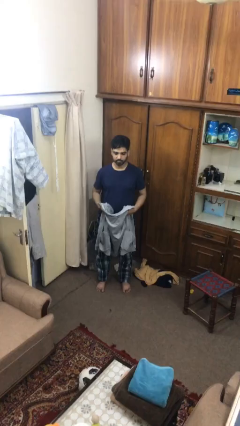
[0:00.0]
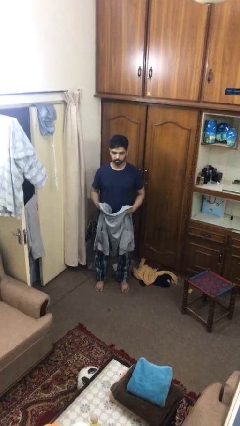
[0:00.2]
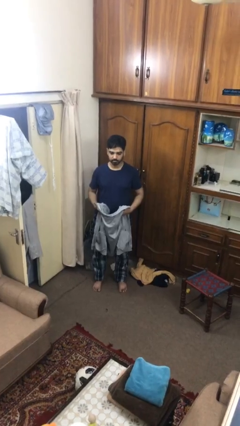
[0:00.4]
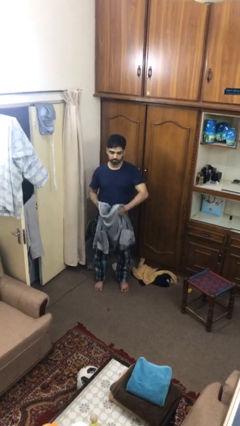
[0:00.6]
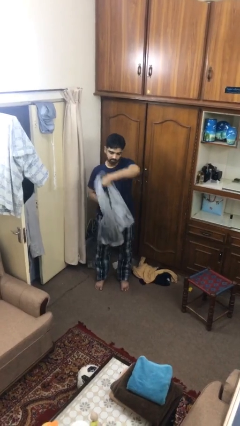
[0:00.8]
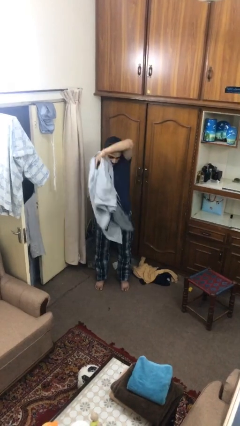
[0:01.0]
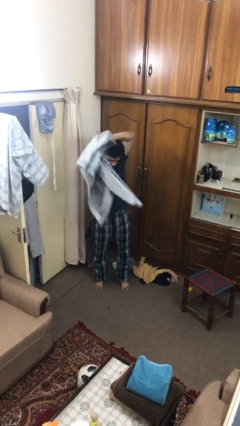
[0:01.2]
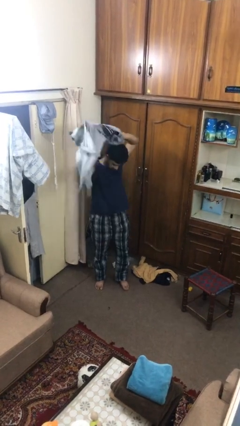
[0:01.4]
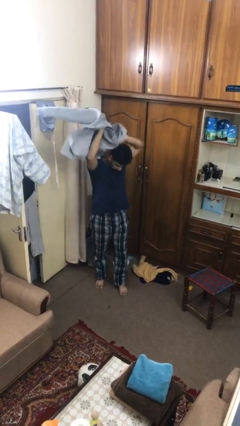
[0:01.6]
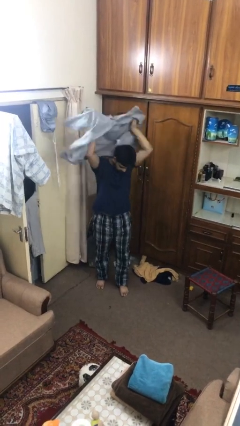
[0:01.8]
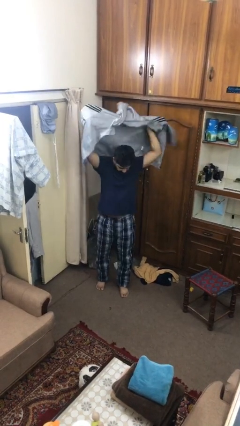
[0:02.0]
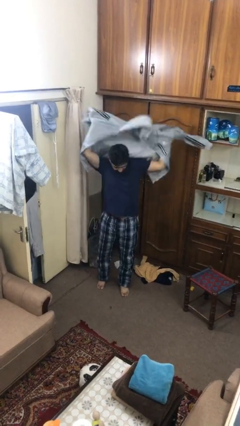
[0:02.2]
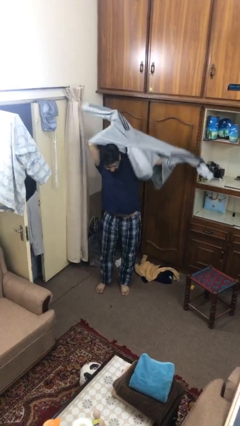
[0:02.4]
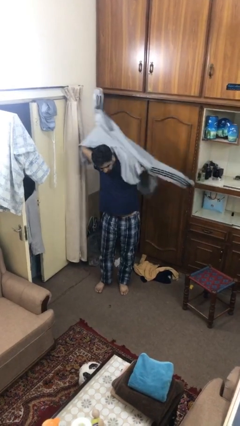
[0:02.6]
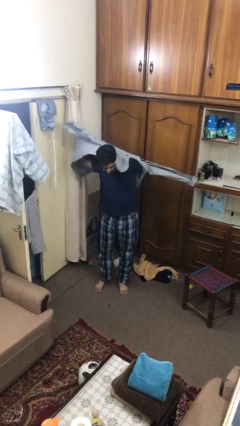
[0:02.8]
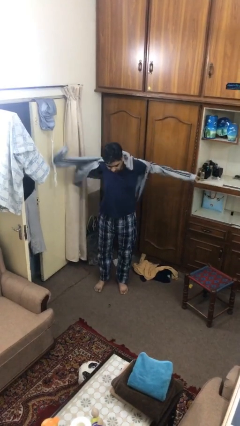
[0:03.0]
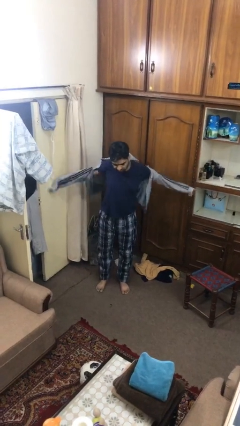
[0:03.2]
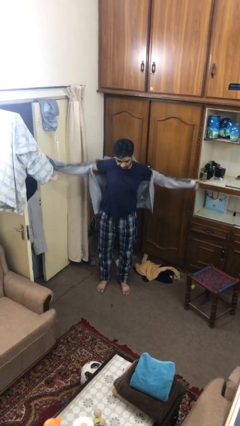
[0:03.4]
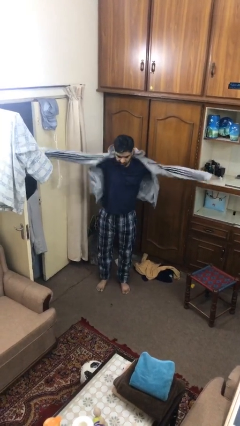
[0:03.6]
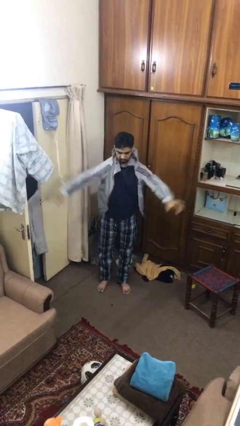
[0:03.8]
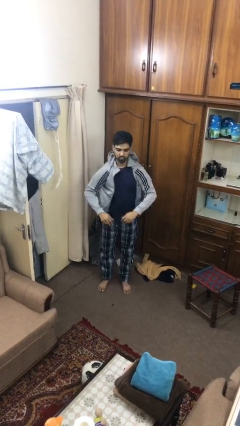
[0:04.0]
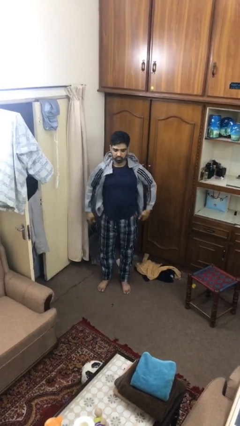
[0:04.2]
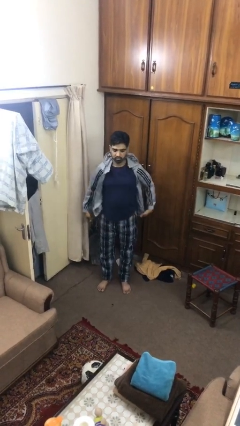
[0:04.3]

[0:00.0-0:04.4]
person puts on jacket

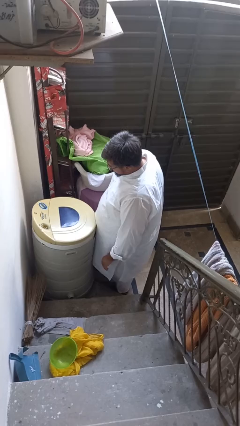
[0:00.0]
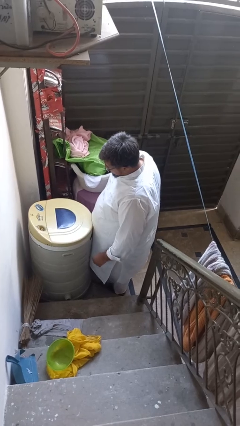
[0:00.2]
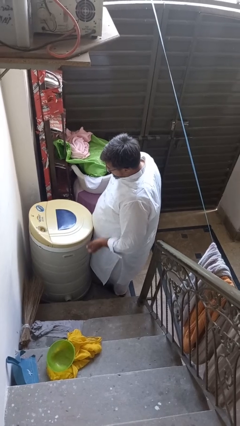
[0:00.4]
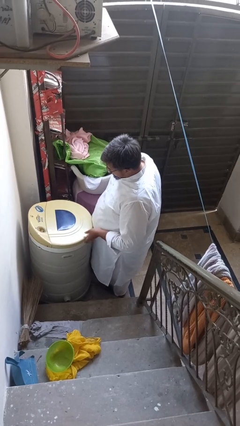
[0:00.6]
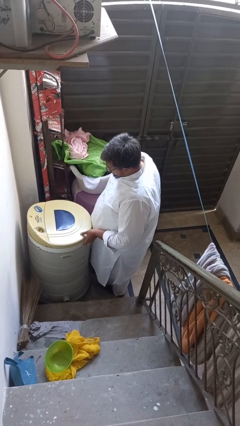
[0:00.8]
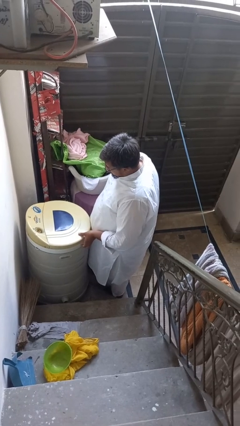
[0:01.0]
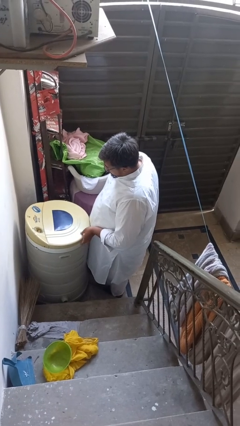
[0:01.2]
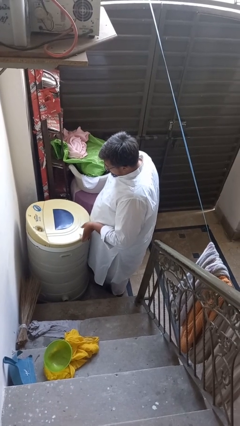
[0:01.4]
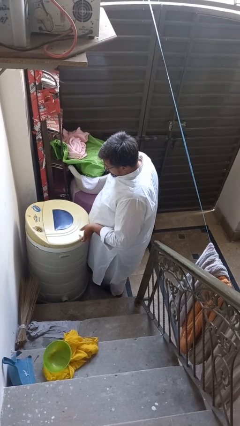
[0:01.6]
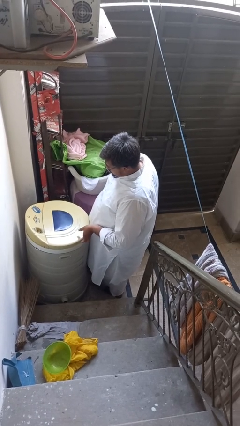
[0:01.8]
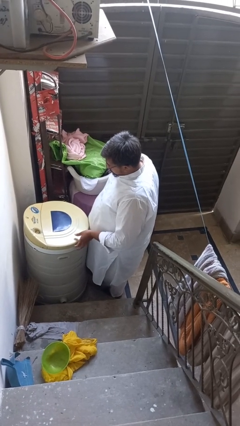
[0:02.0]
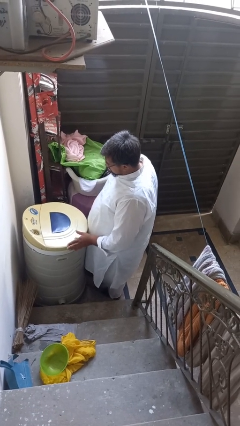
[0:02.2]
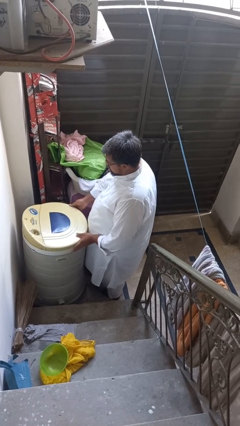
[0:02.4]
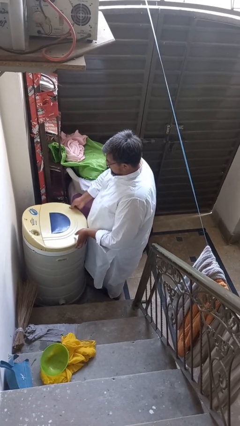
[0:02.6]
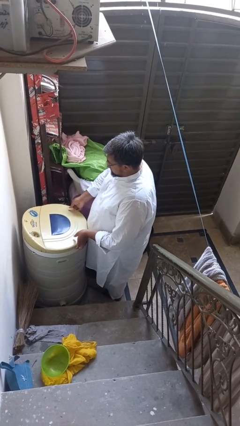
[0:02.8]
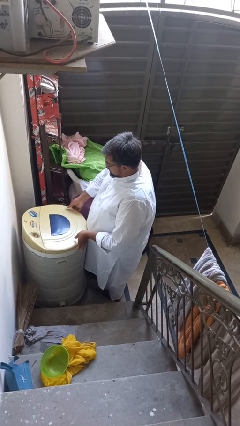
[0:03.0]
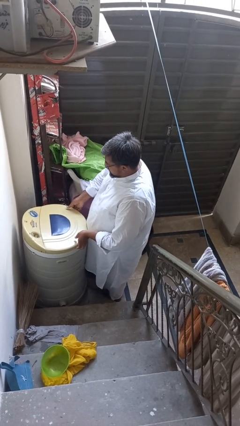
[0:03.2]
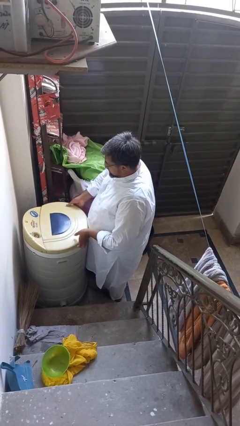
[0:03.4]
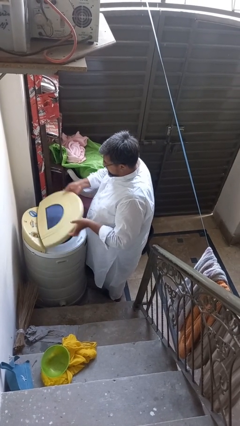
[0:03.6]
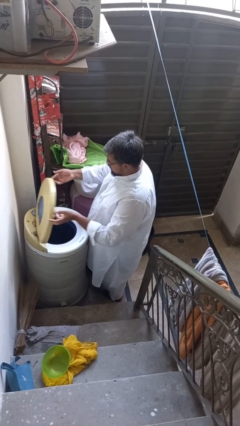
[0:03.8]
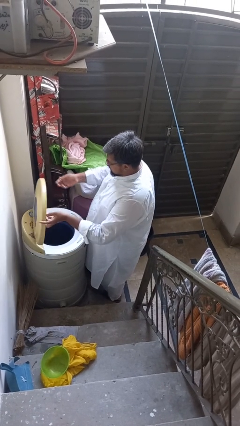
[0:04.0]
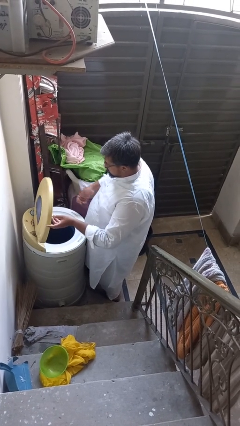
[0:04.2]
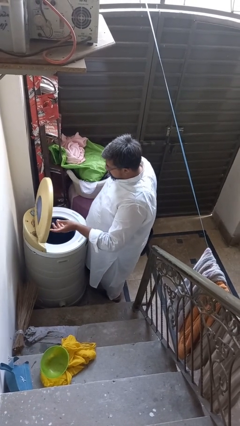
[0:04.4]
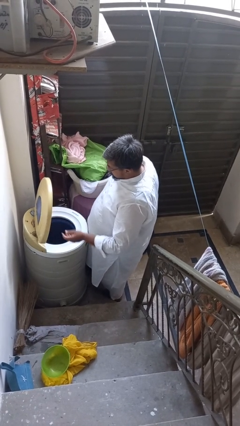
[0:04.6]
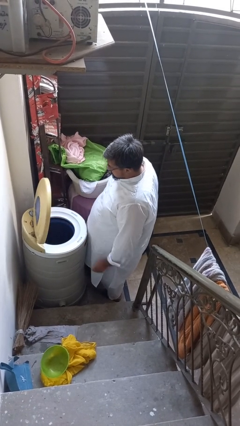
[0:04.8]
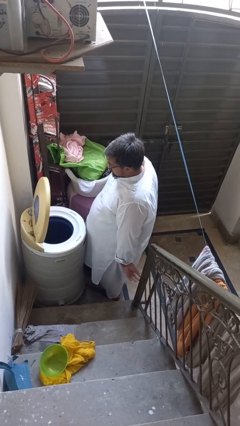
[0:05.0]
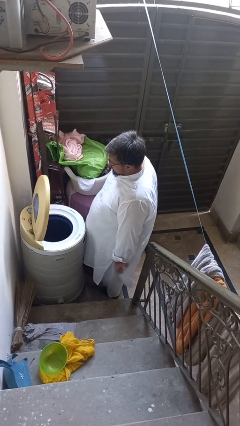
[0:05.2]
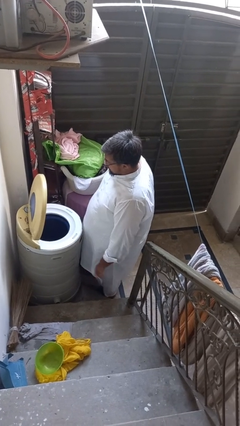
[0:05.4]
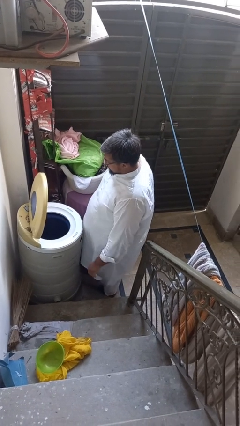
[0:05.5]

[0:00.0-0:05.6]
person opens clothes washer

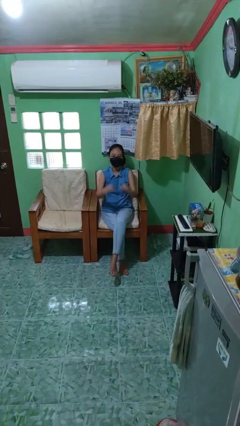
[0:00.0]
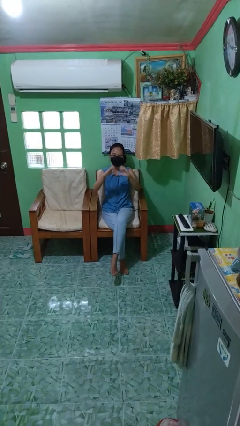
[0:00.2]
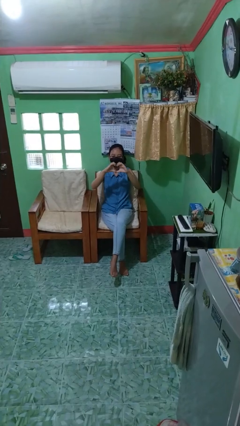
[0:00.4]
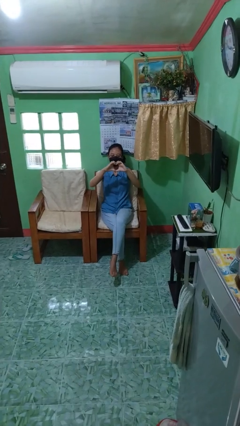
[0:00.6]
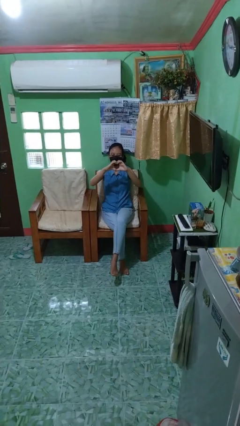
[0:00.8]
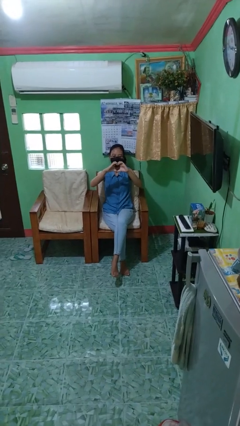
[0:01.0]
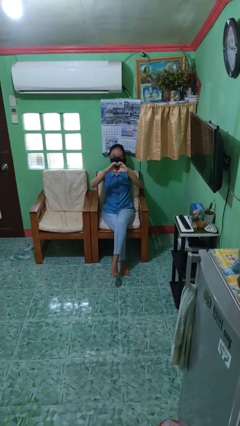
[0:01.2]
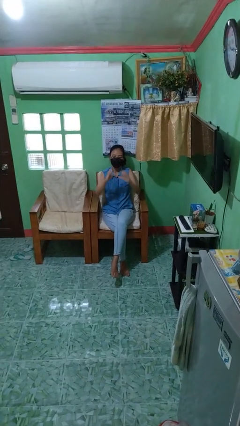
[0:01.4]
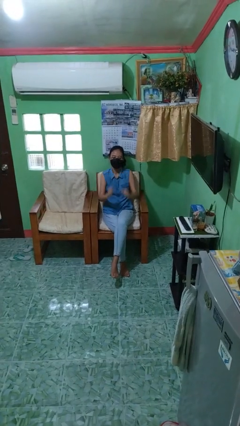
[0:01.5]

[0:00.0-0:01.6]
person gestures heart

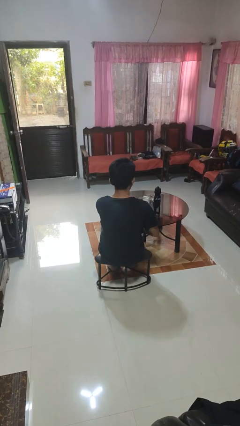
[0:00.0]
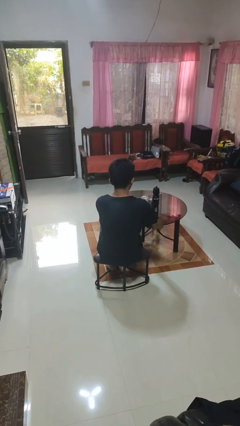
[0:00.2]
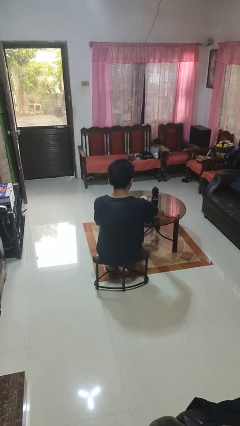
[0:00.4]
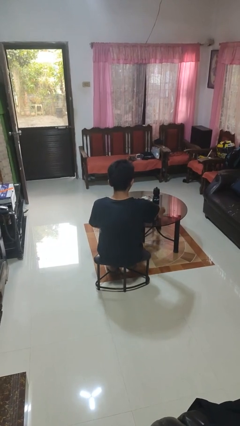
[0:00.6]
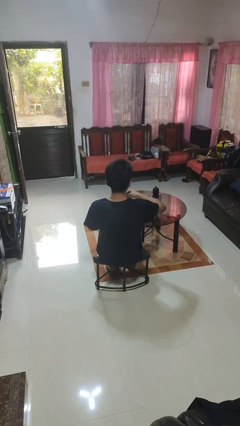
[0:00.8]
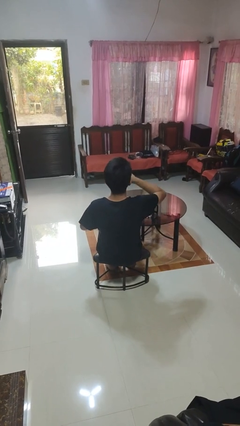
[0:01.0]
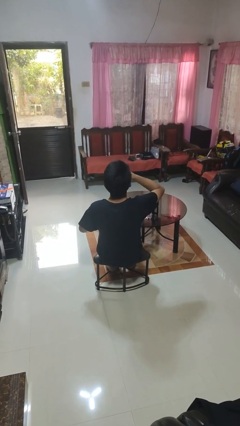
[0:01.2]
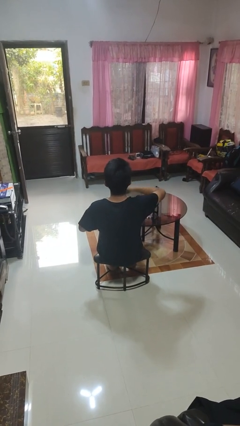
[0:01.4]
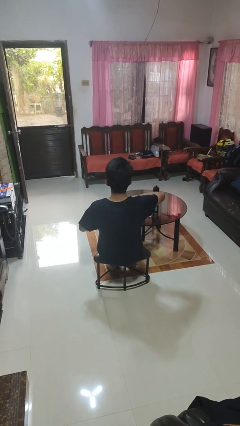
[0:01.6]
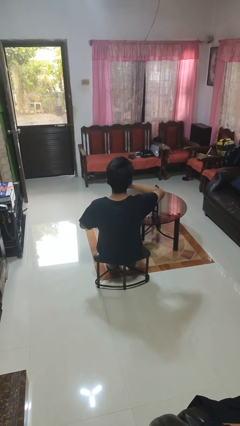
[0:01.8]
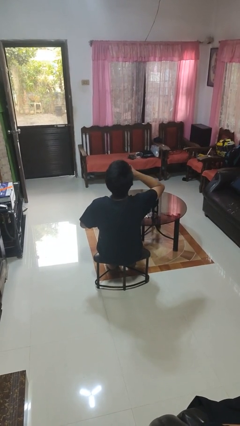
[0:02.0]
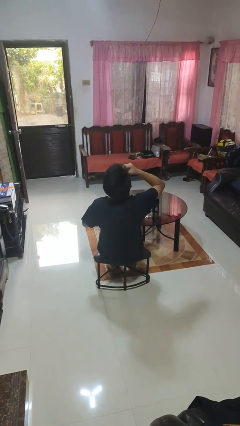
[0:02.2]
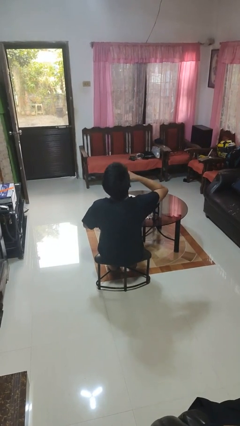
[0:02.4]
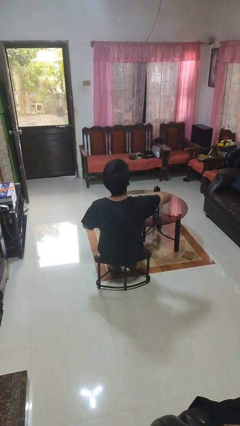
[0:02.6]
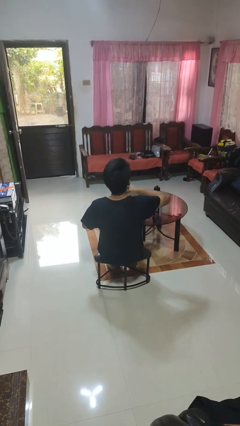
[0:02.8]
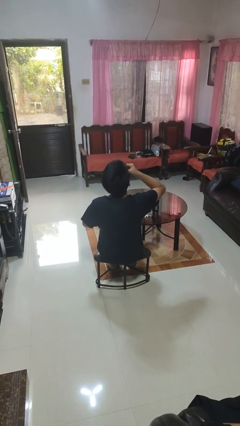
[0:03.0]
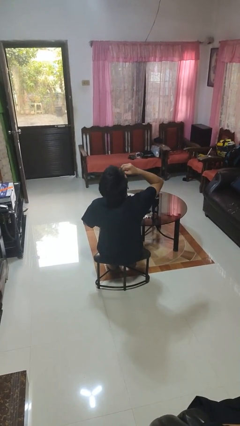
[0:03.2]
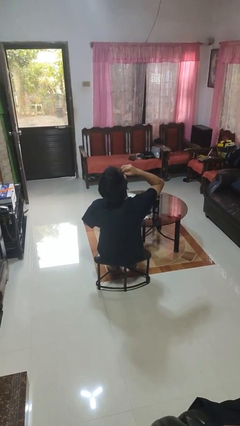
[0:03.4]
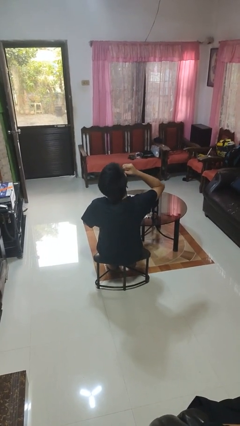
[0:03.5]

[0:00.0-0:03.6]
person eats with hands

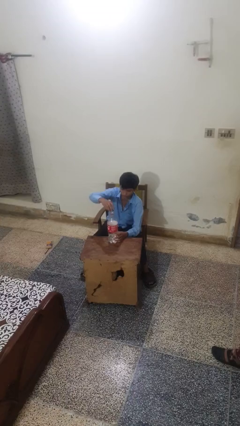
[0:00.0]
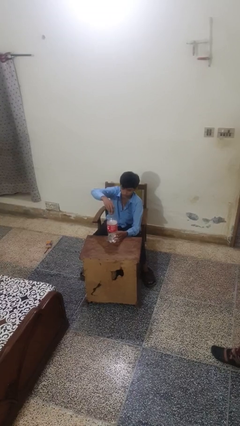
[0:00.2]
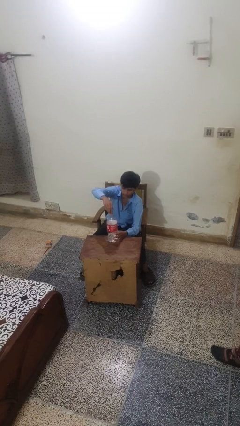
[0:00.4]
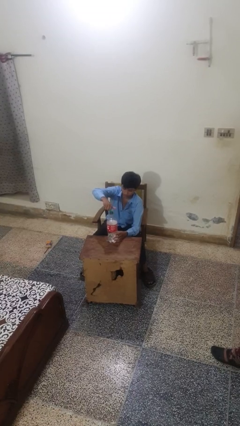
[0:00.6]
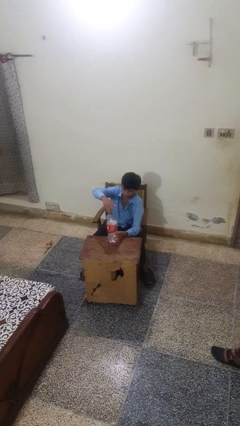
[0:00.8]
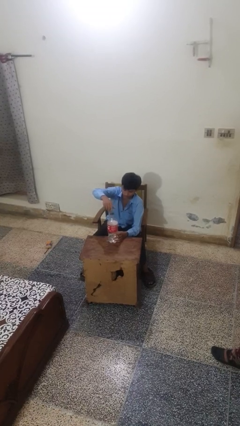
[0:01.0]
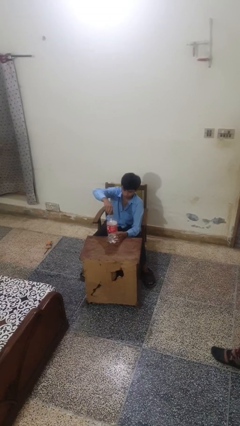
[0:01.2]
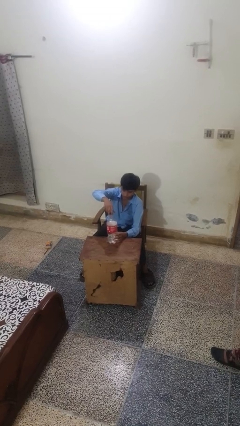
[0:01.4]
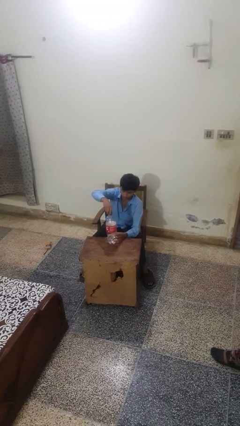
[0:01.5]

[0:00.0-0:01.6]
person screws lid to bottle

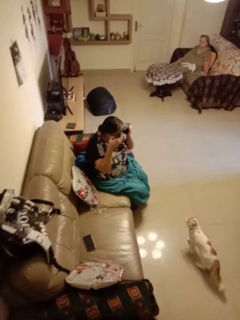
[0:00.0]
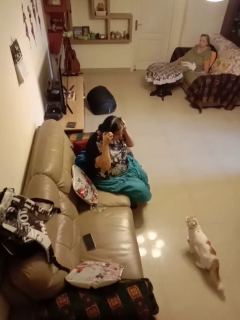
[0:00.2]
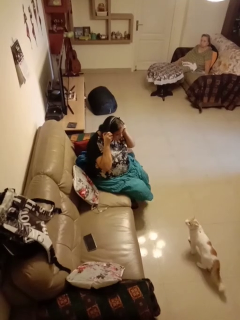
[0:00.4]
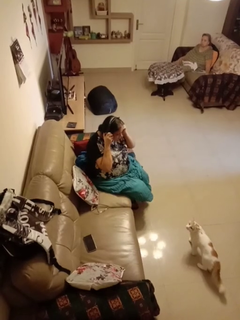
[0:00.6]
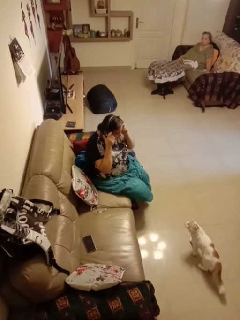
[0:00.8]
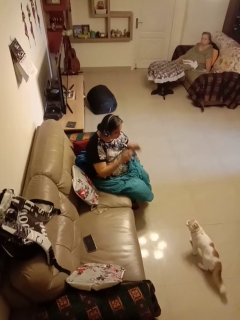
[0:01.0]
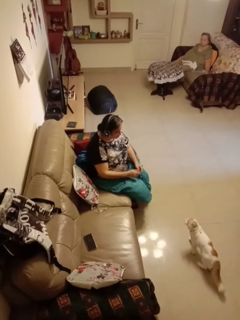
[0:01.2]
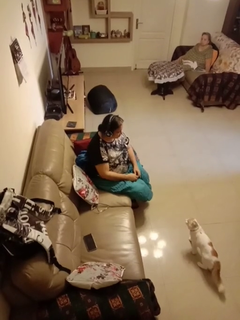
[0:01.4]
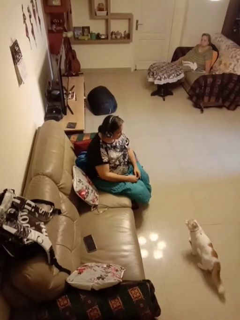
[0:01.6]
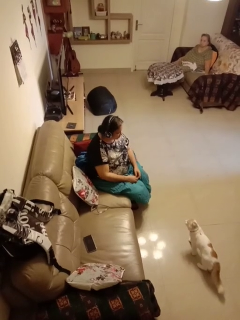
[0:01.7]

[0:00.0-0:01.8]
person puts on headphones
